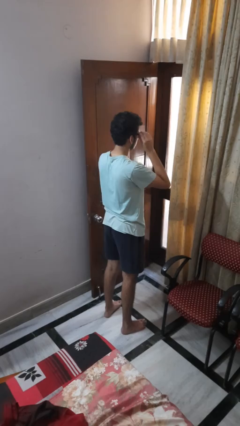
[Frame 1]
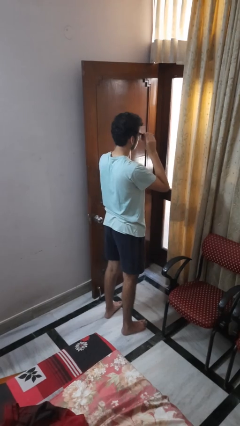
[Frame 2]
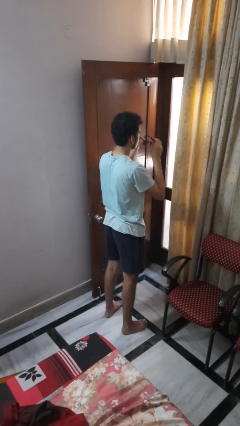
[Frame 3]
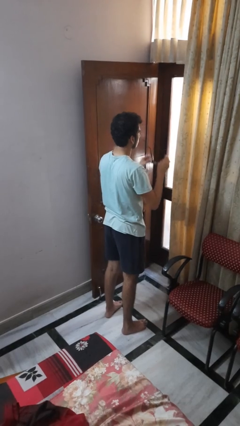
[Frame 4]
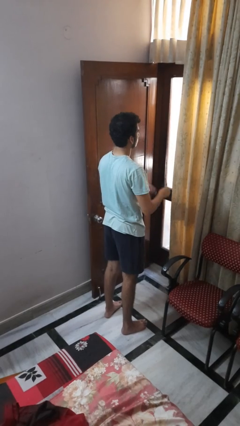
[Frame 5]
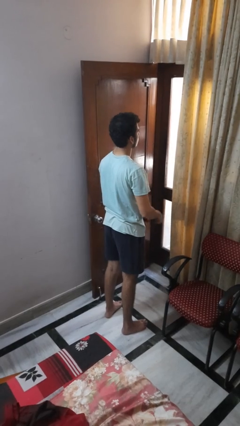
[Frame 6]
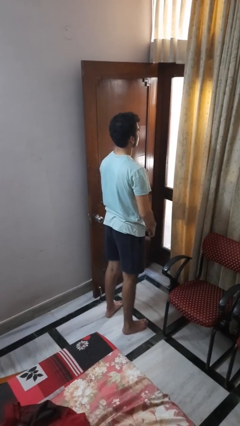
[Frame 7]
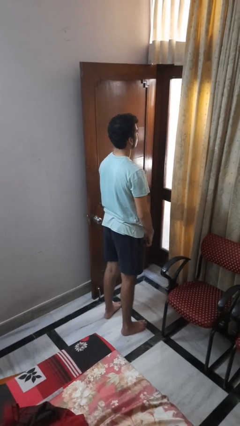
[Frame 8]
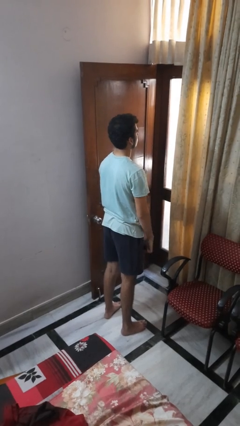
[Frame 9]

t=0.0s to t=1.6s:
person takes off sunglasses

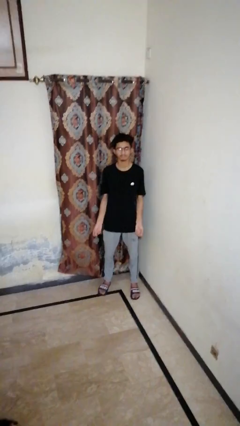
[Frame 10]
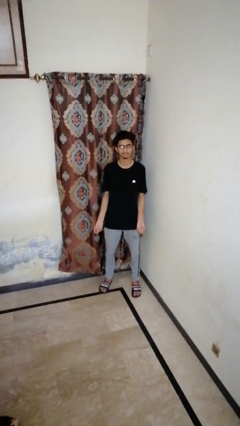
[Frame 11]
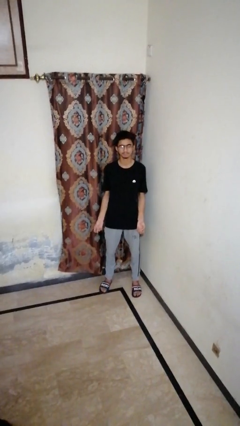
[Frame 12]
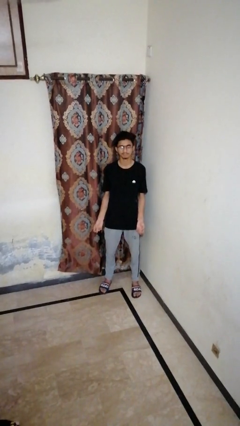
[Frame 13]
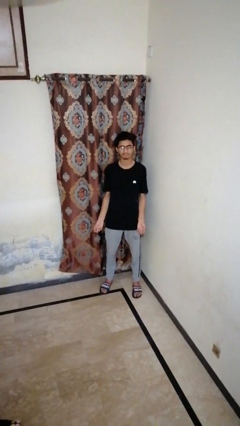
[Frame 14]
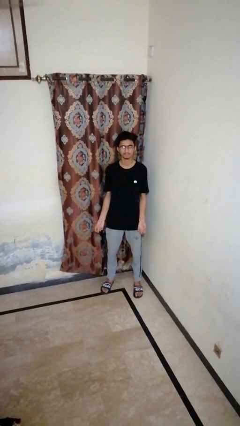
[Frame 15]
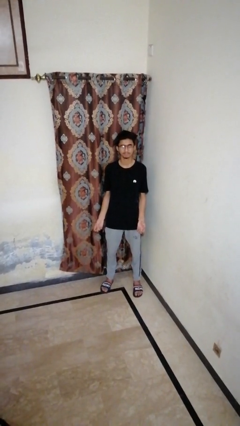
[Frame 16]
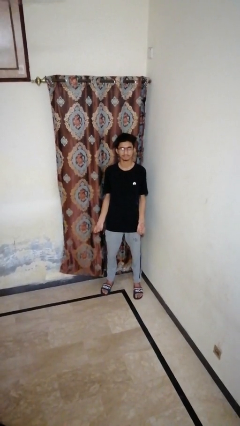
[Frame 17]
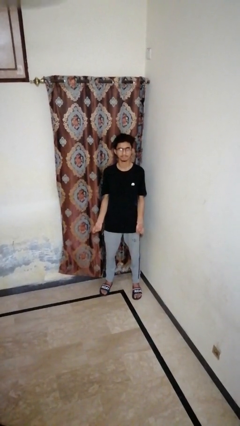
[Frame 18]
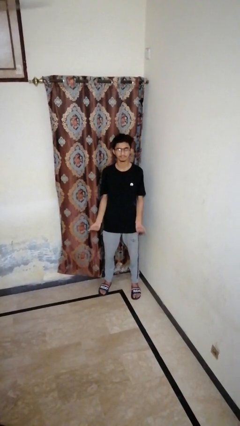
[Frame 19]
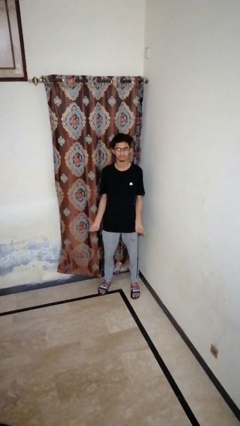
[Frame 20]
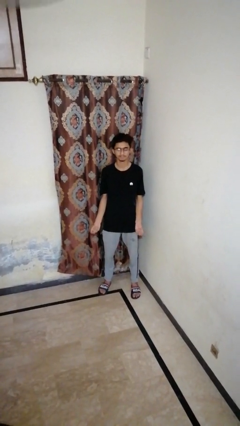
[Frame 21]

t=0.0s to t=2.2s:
person snaps fingers

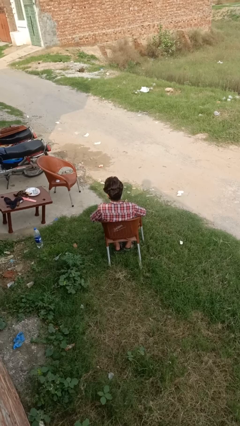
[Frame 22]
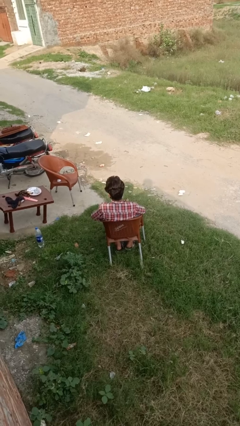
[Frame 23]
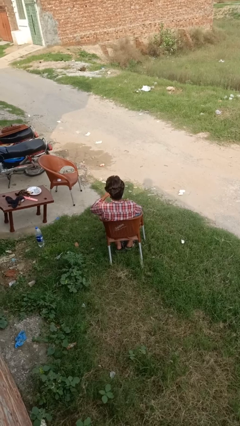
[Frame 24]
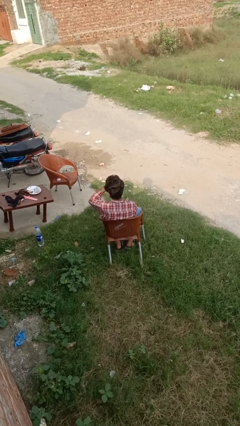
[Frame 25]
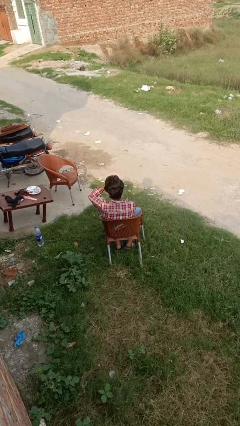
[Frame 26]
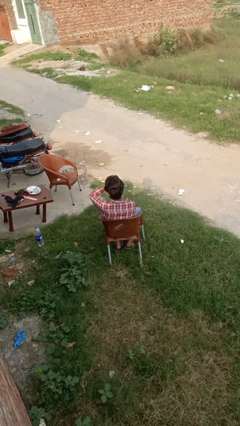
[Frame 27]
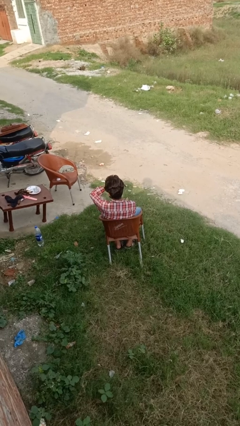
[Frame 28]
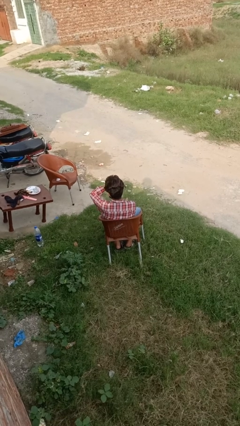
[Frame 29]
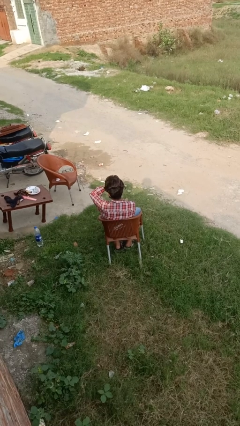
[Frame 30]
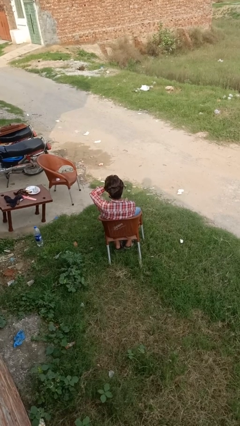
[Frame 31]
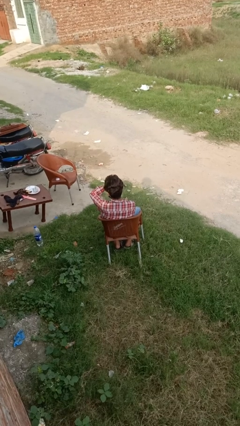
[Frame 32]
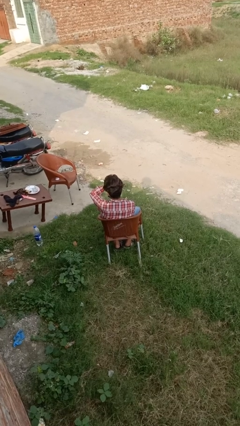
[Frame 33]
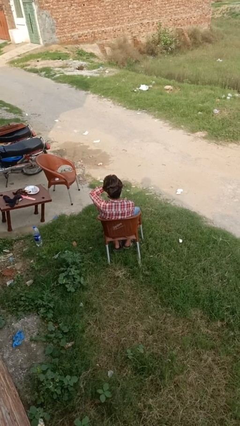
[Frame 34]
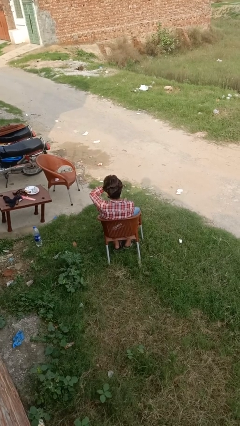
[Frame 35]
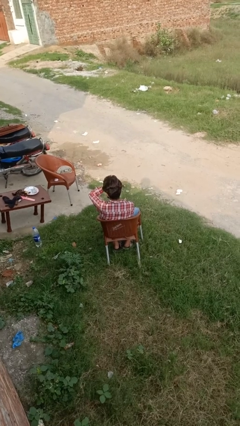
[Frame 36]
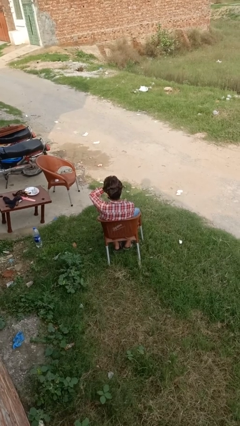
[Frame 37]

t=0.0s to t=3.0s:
person puts on wristwatch

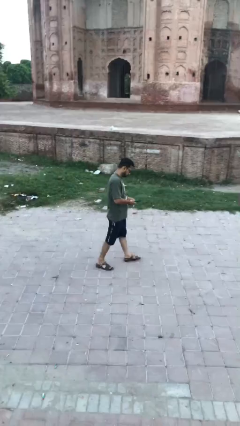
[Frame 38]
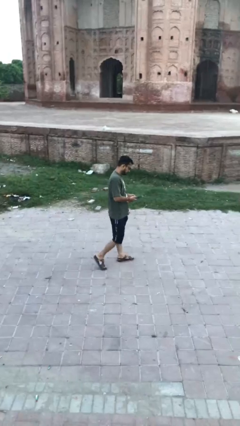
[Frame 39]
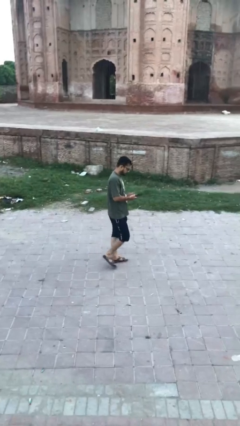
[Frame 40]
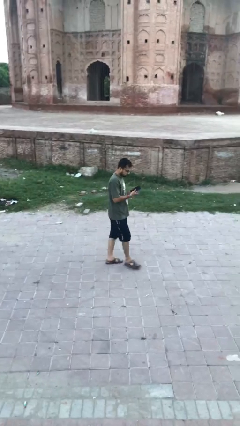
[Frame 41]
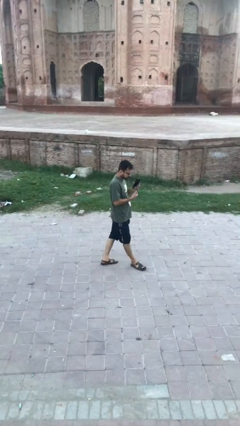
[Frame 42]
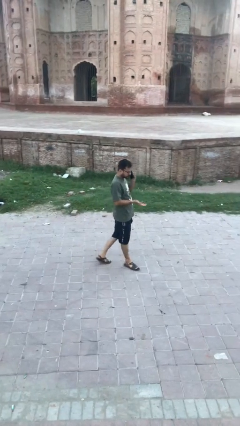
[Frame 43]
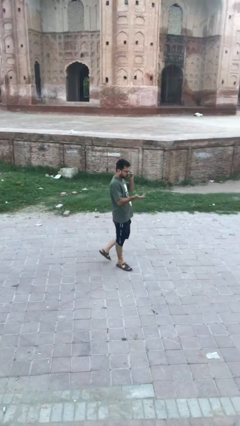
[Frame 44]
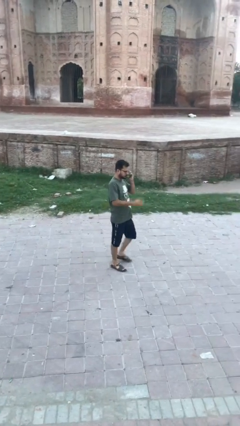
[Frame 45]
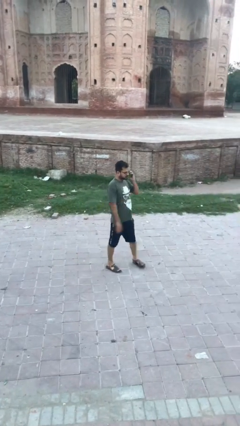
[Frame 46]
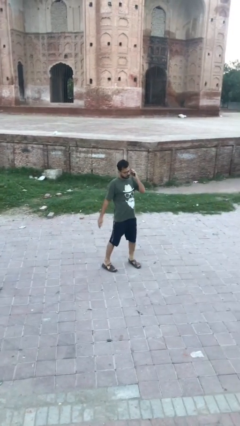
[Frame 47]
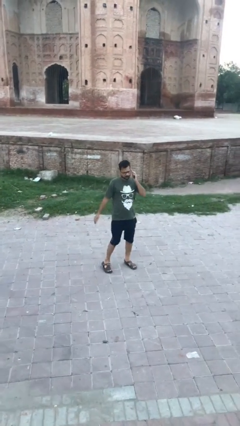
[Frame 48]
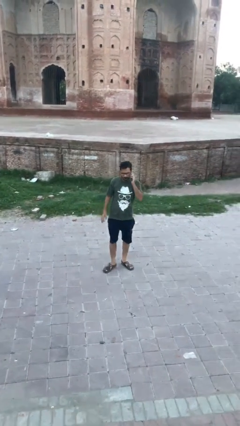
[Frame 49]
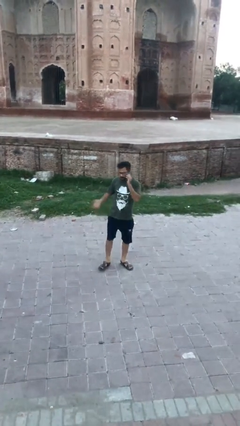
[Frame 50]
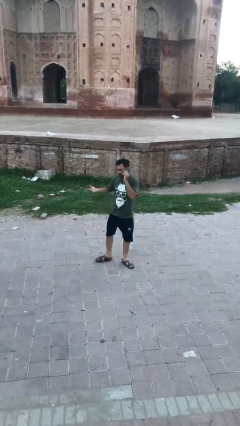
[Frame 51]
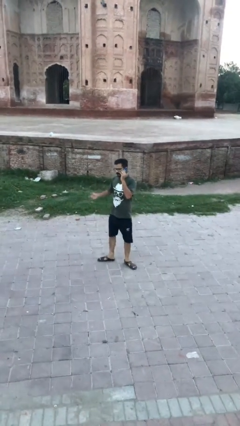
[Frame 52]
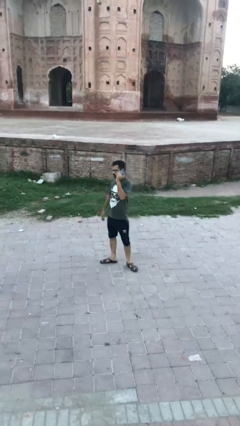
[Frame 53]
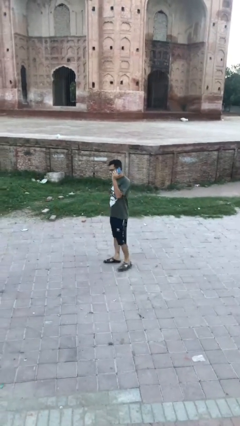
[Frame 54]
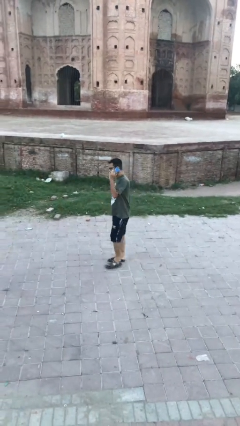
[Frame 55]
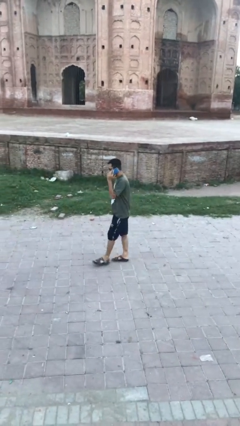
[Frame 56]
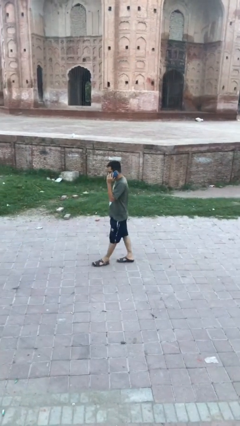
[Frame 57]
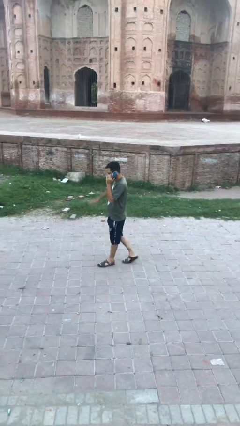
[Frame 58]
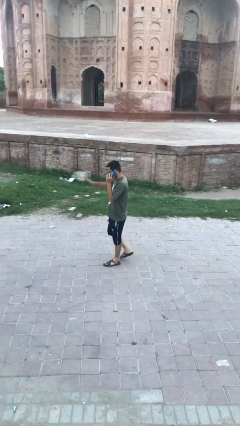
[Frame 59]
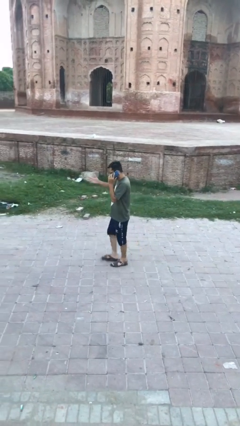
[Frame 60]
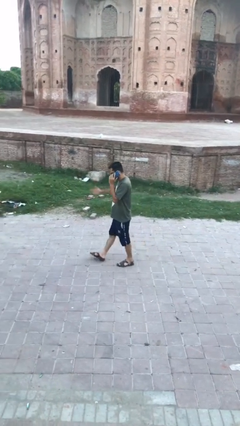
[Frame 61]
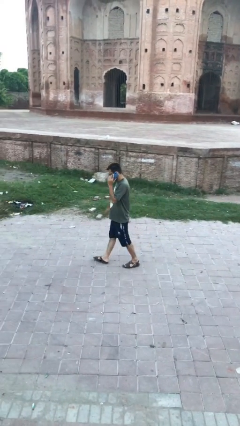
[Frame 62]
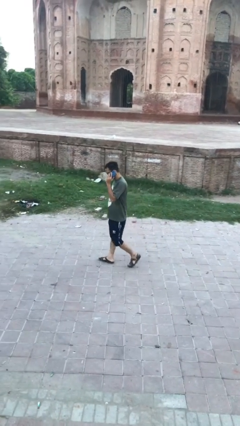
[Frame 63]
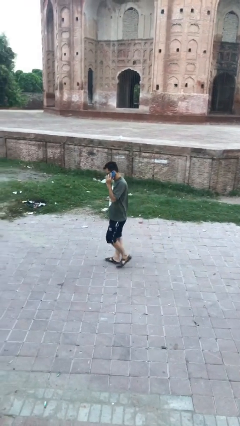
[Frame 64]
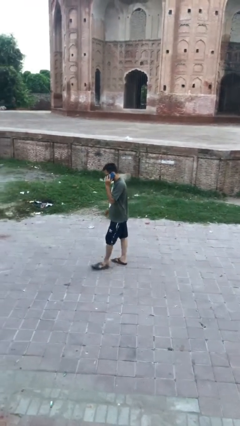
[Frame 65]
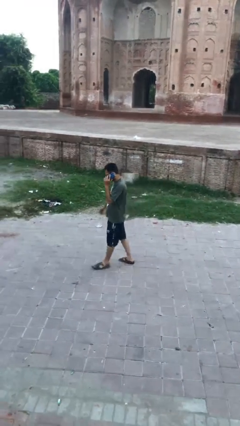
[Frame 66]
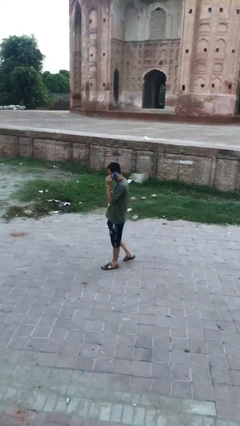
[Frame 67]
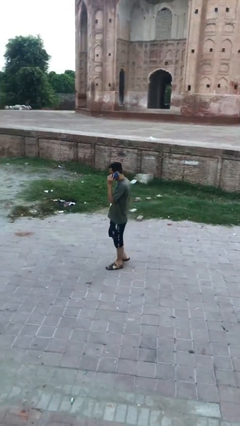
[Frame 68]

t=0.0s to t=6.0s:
person talks on phone

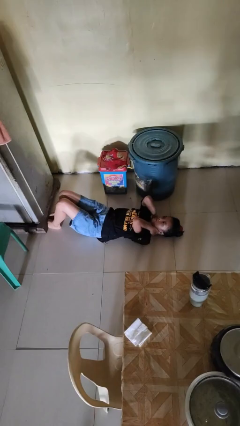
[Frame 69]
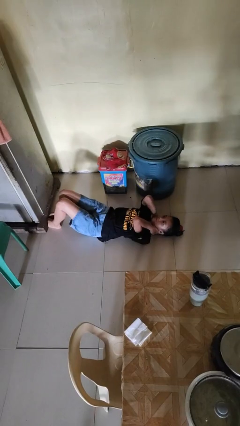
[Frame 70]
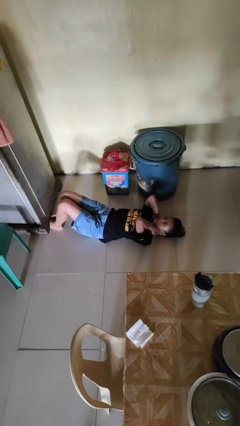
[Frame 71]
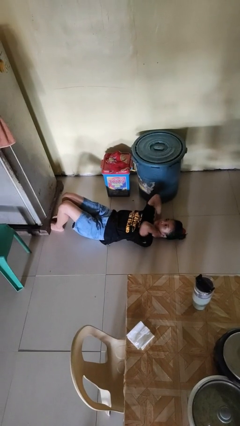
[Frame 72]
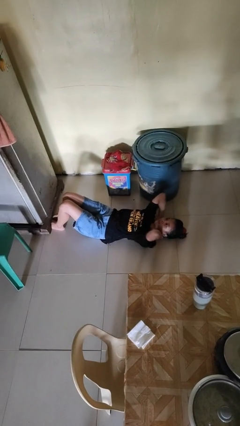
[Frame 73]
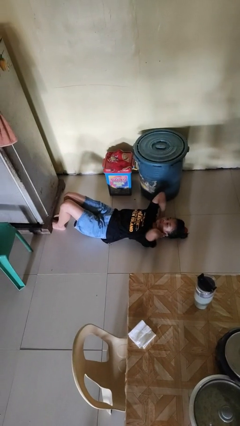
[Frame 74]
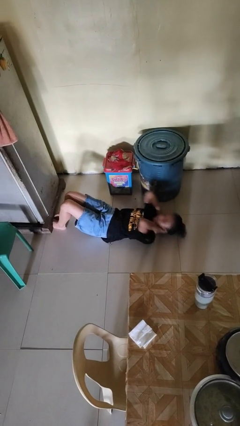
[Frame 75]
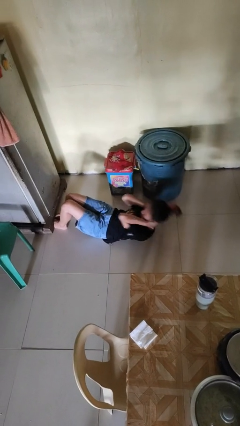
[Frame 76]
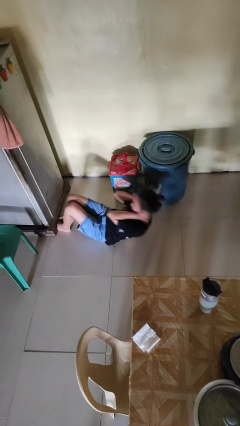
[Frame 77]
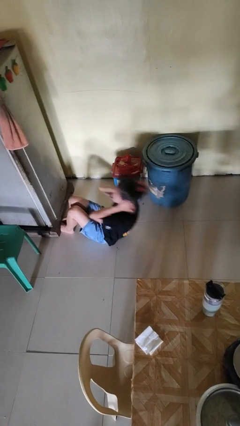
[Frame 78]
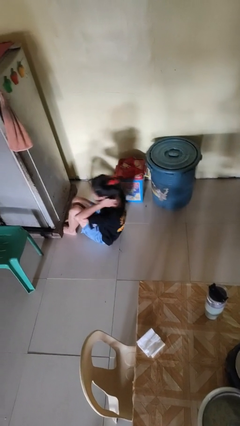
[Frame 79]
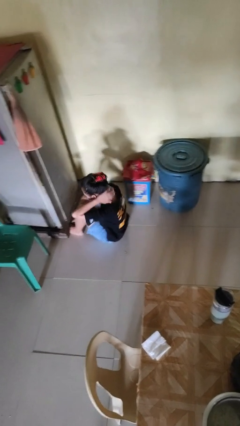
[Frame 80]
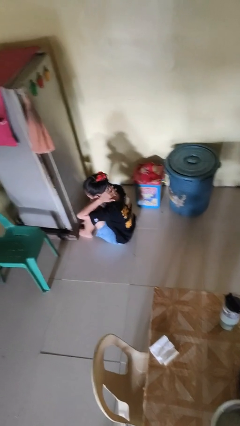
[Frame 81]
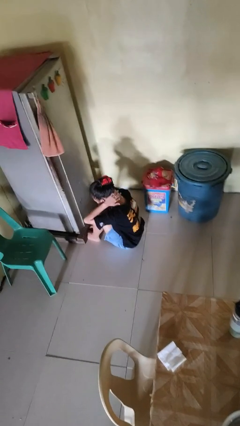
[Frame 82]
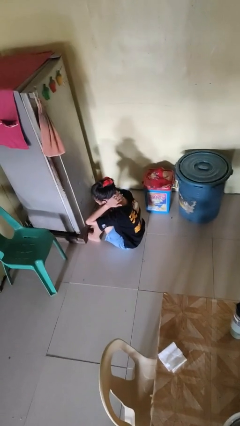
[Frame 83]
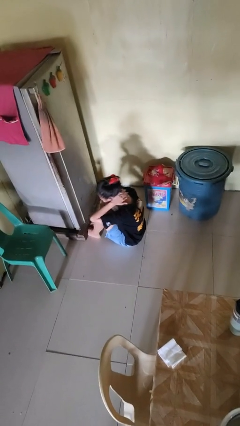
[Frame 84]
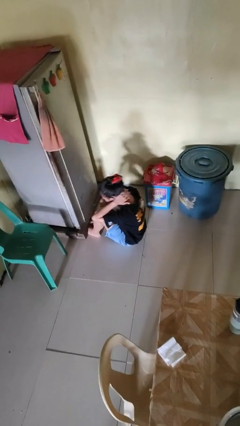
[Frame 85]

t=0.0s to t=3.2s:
person exercises with situp

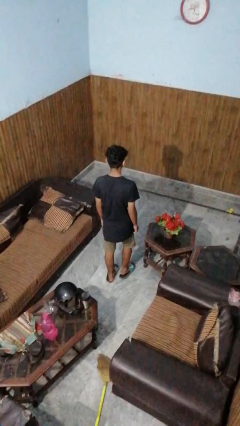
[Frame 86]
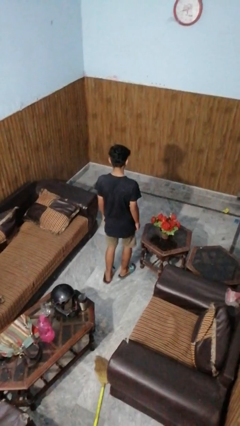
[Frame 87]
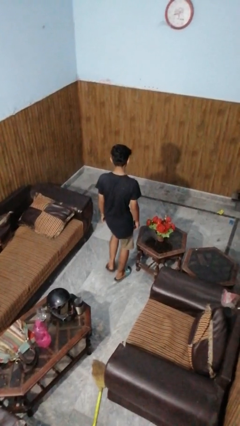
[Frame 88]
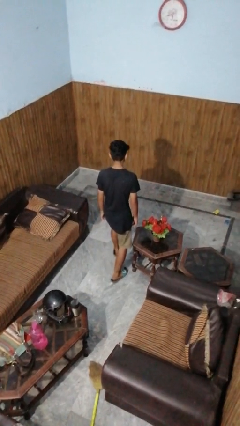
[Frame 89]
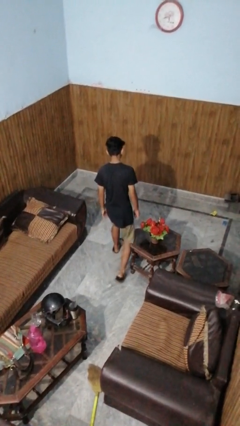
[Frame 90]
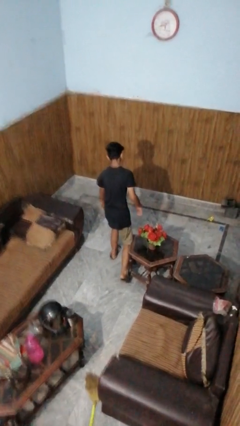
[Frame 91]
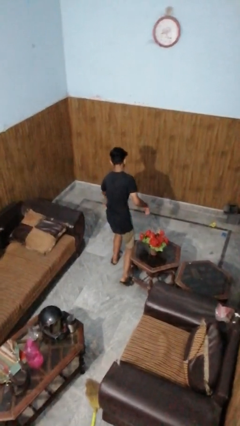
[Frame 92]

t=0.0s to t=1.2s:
person trips on object on floor

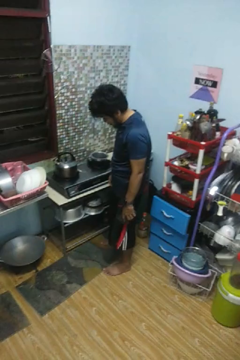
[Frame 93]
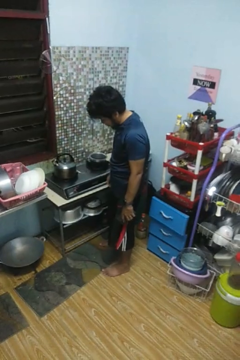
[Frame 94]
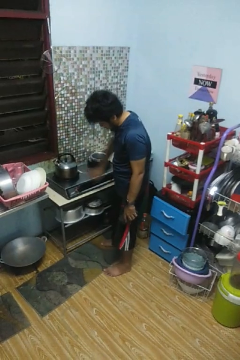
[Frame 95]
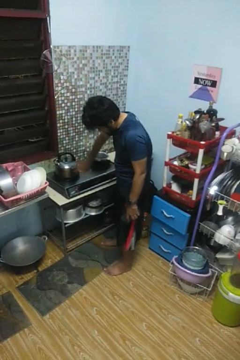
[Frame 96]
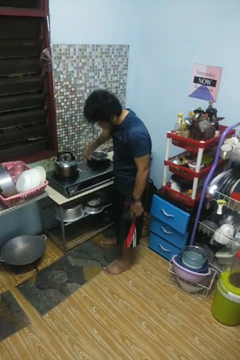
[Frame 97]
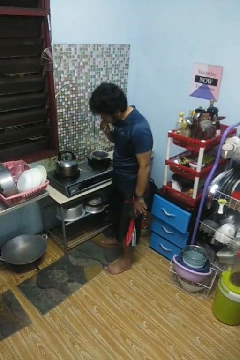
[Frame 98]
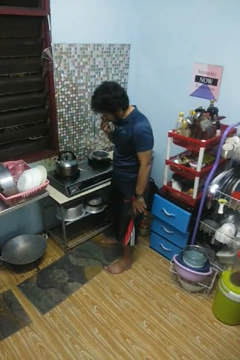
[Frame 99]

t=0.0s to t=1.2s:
person burns hand
